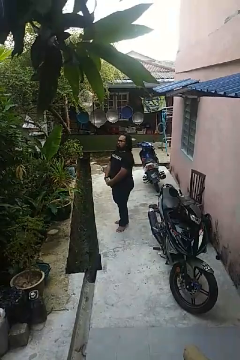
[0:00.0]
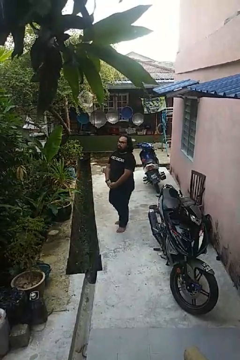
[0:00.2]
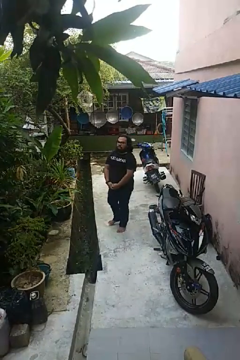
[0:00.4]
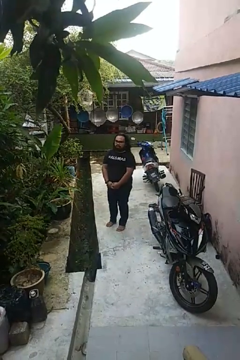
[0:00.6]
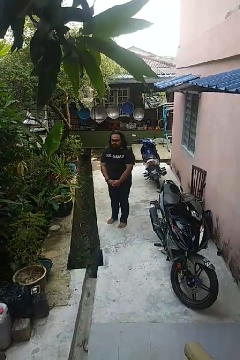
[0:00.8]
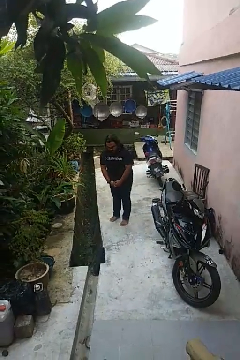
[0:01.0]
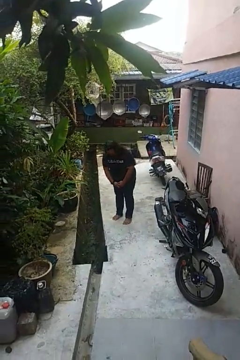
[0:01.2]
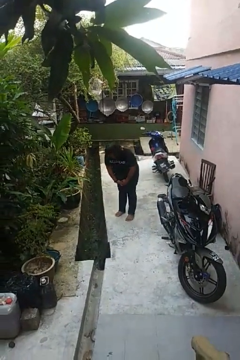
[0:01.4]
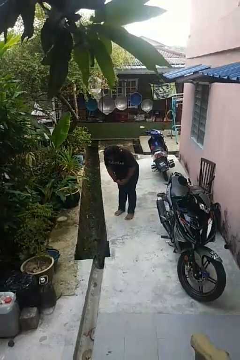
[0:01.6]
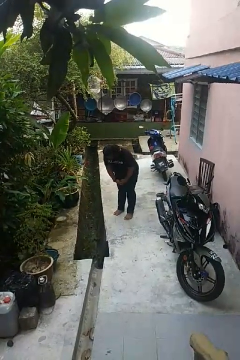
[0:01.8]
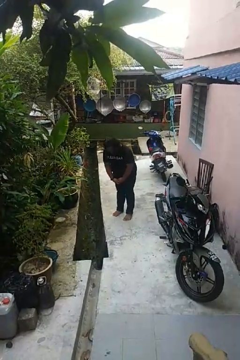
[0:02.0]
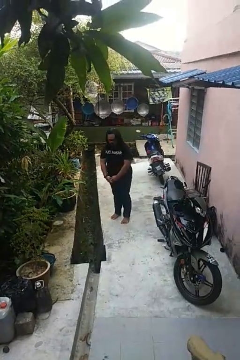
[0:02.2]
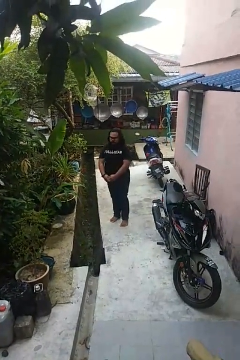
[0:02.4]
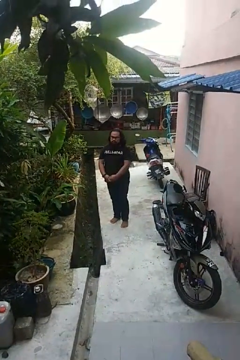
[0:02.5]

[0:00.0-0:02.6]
person bows

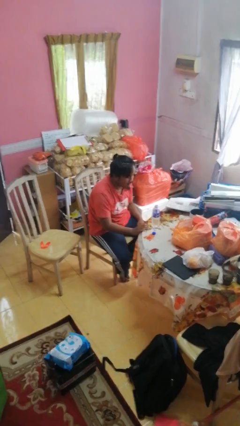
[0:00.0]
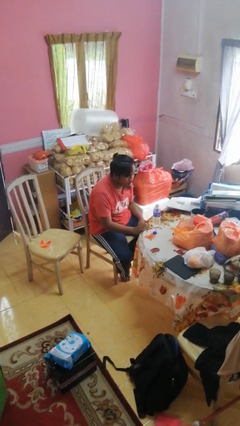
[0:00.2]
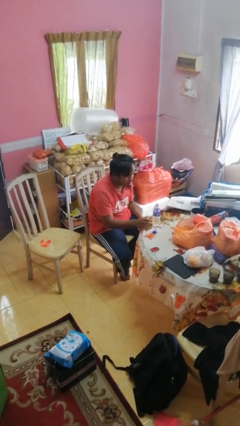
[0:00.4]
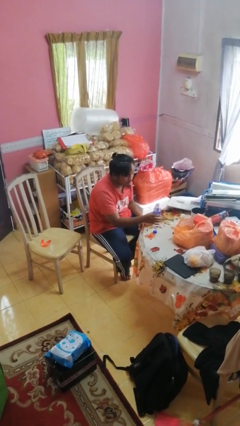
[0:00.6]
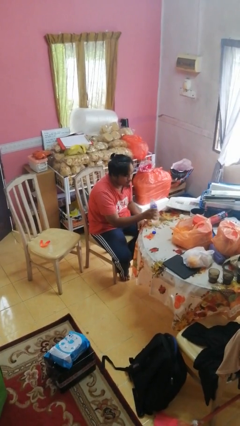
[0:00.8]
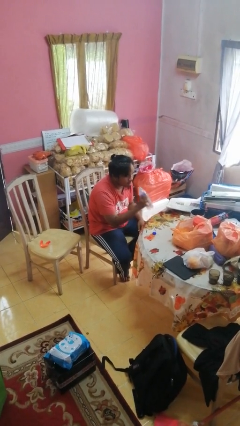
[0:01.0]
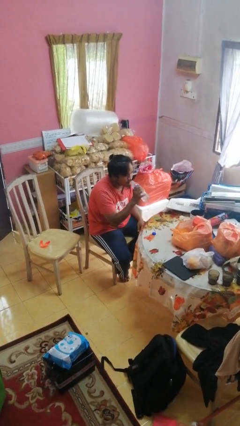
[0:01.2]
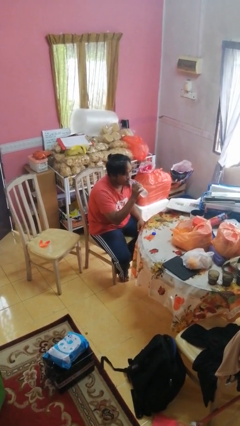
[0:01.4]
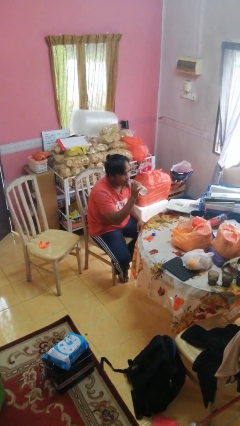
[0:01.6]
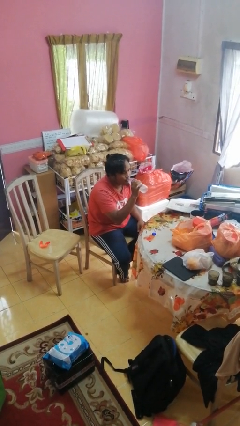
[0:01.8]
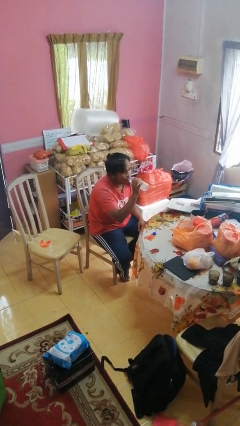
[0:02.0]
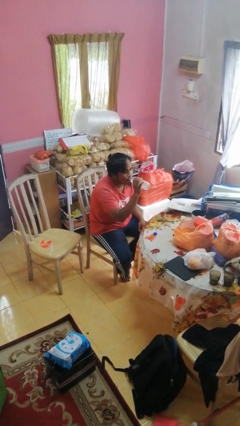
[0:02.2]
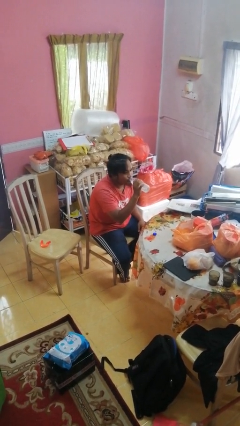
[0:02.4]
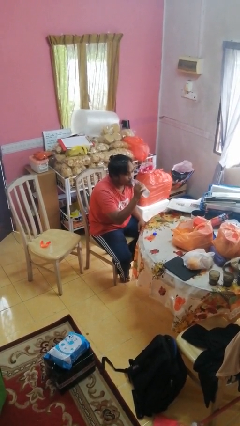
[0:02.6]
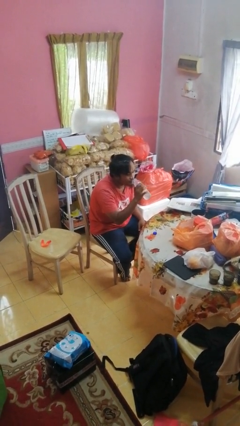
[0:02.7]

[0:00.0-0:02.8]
person drinks from bottle

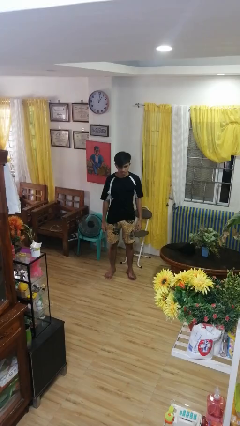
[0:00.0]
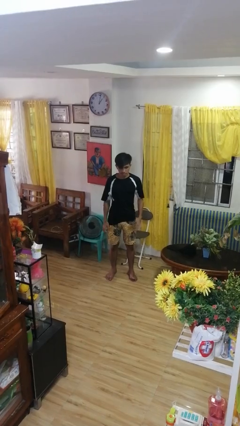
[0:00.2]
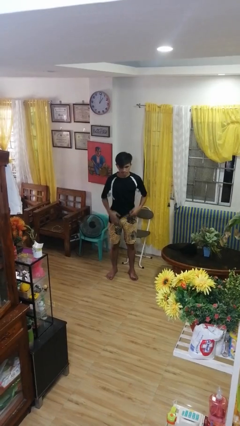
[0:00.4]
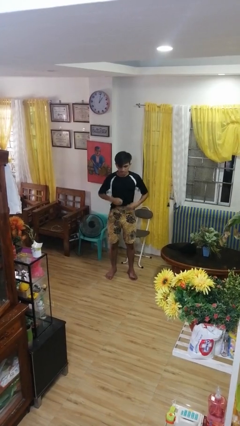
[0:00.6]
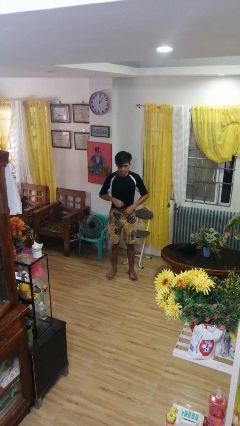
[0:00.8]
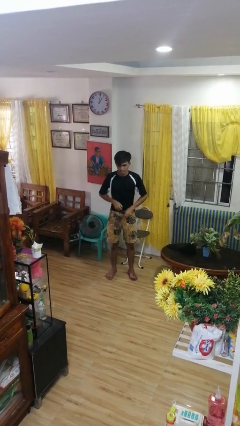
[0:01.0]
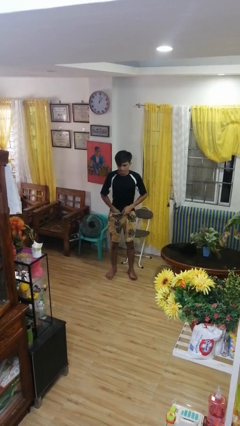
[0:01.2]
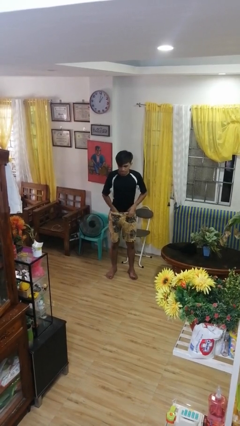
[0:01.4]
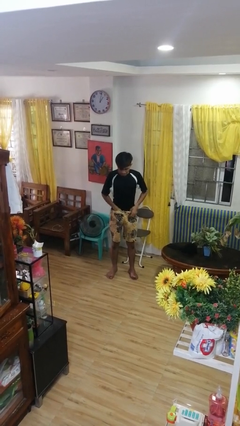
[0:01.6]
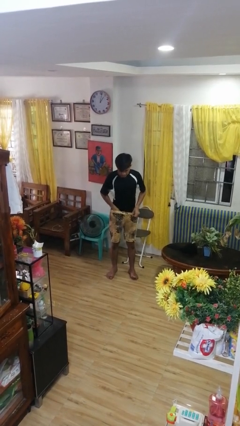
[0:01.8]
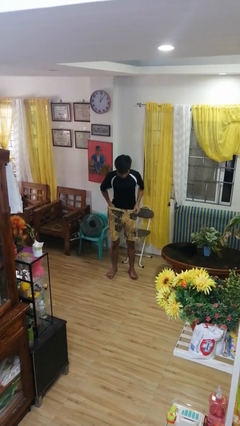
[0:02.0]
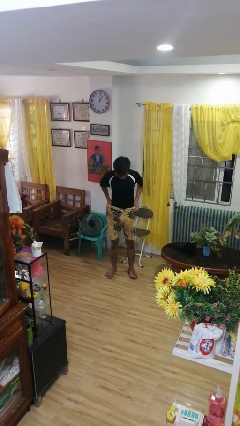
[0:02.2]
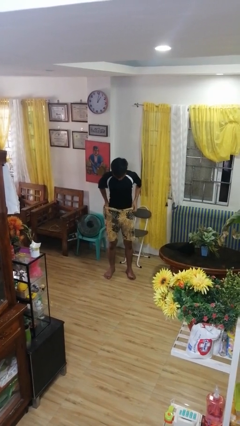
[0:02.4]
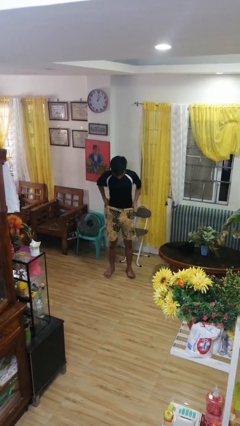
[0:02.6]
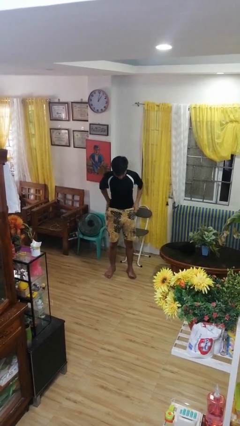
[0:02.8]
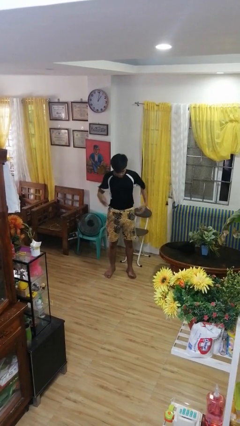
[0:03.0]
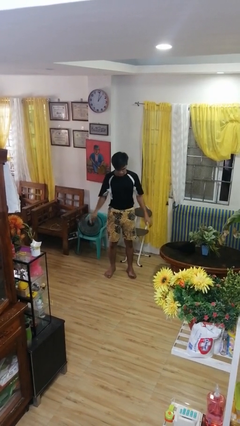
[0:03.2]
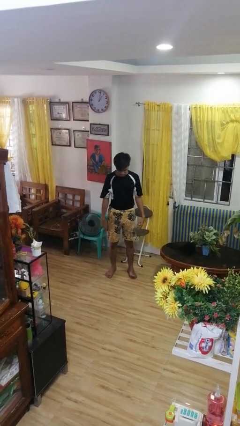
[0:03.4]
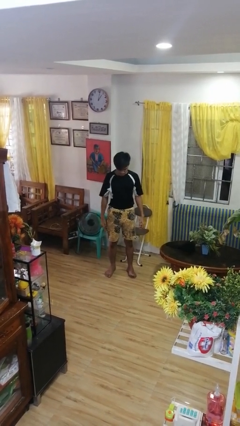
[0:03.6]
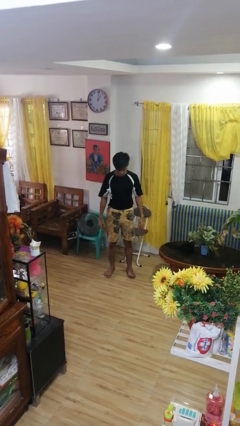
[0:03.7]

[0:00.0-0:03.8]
person tucks in shirt

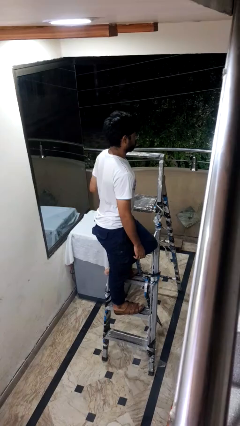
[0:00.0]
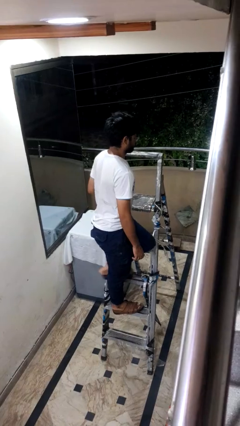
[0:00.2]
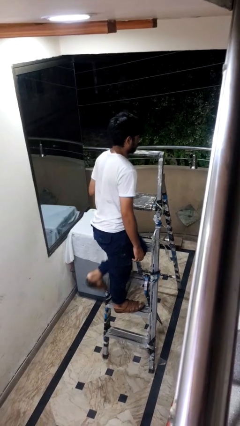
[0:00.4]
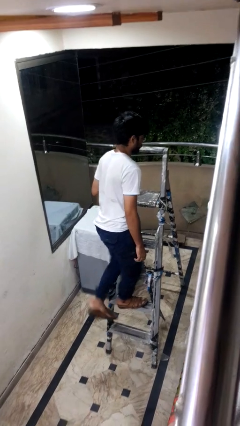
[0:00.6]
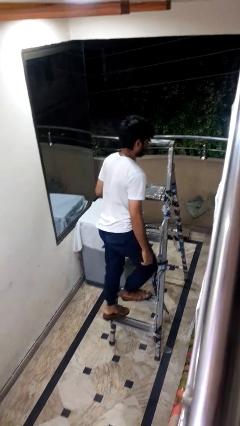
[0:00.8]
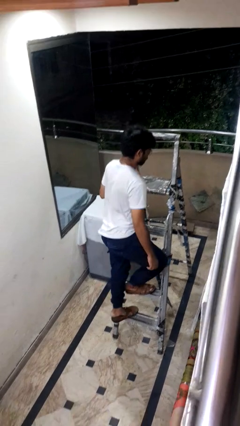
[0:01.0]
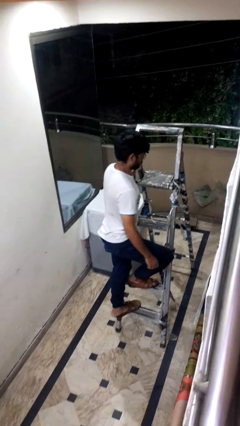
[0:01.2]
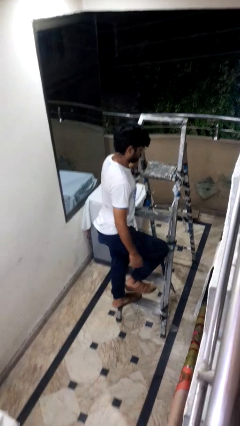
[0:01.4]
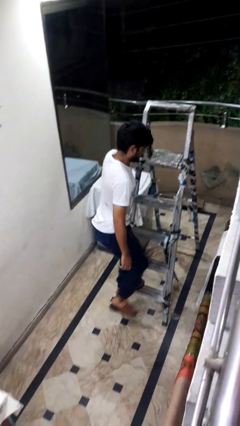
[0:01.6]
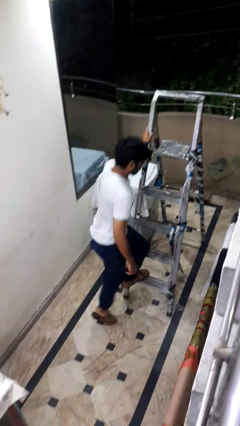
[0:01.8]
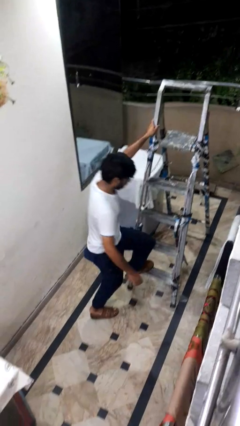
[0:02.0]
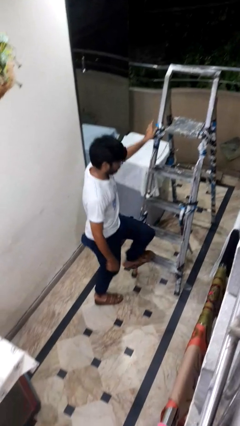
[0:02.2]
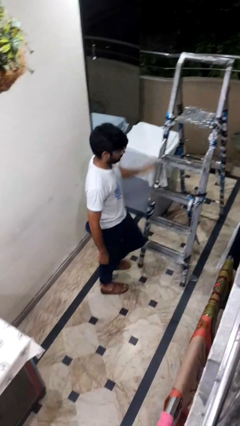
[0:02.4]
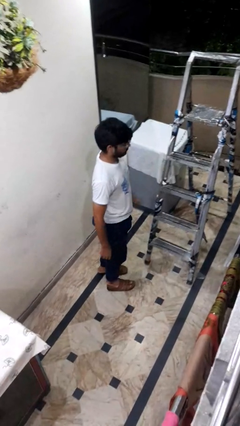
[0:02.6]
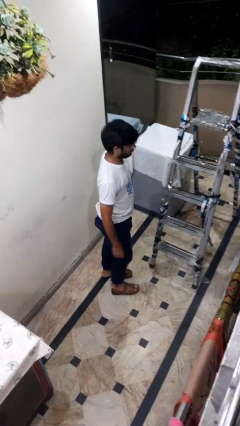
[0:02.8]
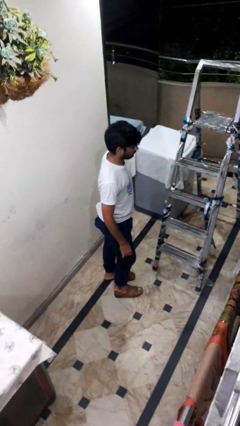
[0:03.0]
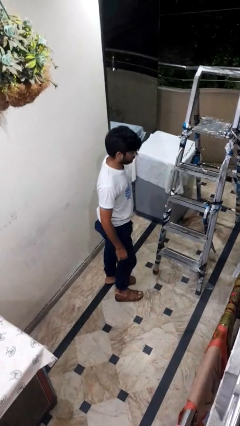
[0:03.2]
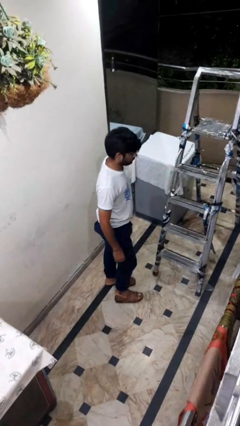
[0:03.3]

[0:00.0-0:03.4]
person climbs down ladder

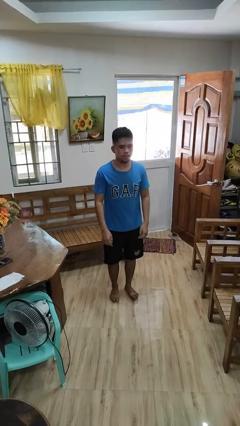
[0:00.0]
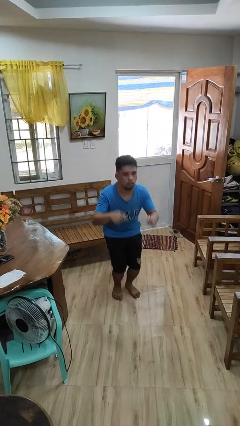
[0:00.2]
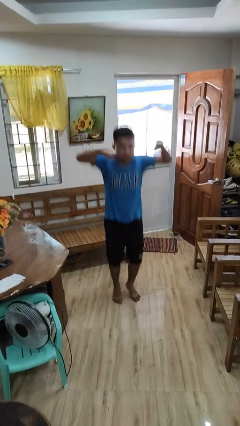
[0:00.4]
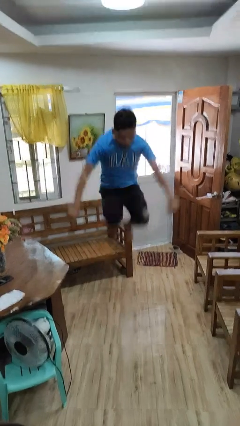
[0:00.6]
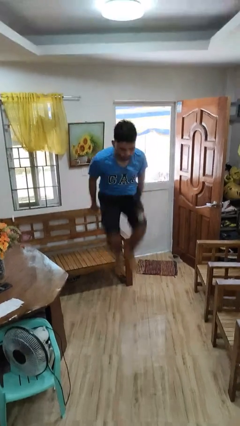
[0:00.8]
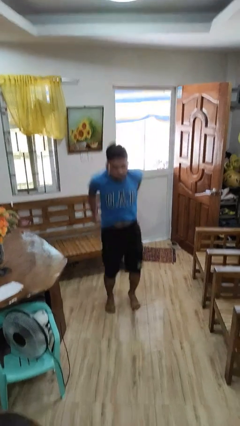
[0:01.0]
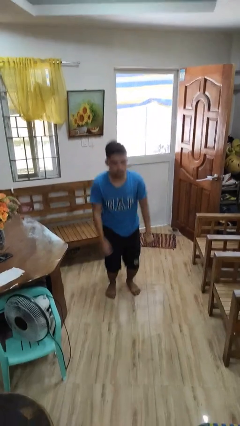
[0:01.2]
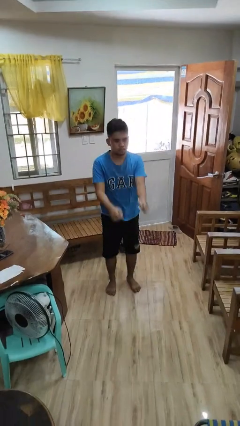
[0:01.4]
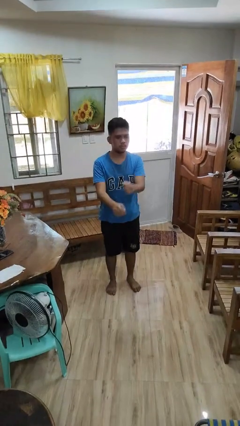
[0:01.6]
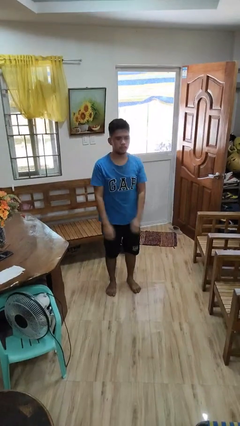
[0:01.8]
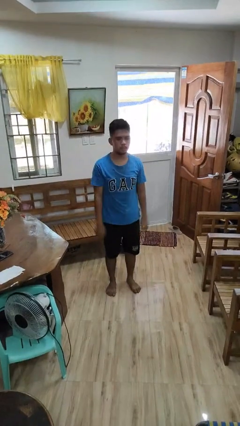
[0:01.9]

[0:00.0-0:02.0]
person jumps

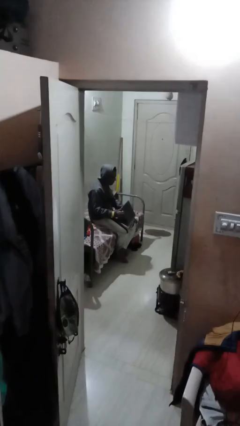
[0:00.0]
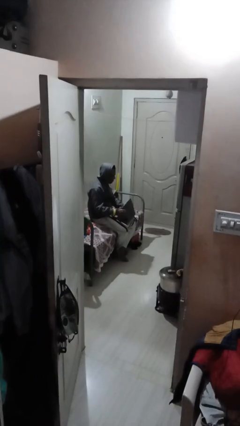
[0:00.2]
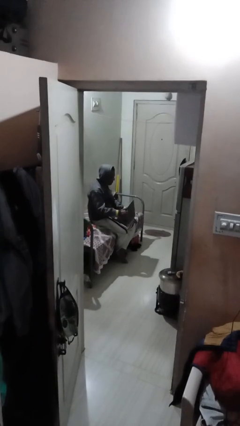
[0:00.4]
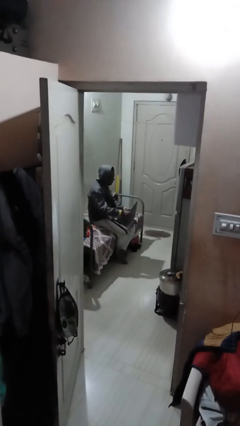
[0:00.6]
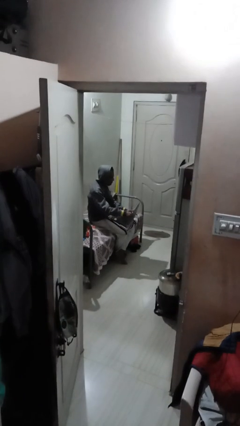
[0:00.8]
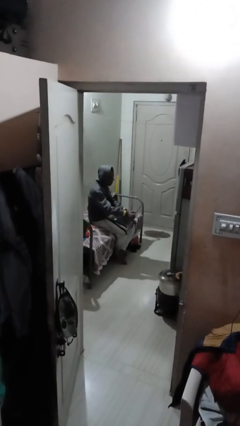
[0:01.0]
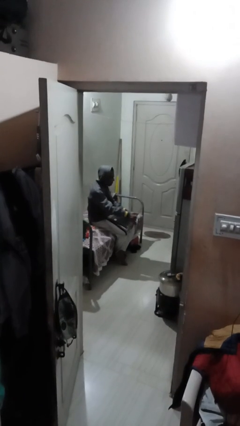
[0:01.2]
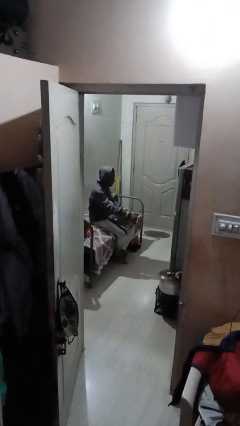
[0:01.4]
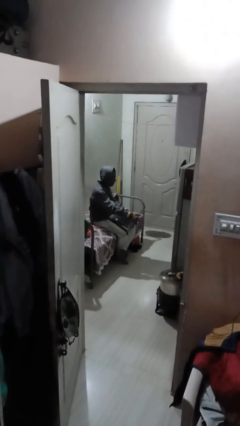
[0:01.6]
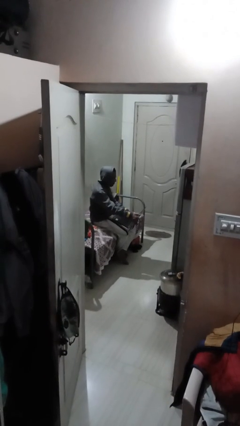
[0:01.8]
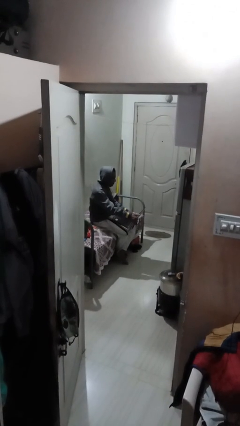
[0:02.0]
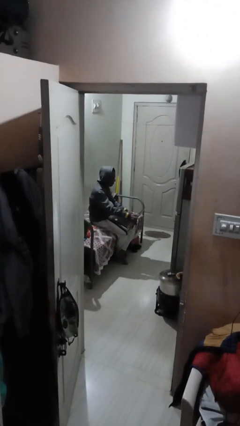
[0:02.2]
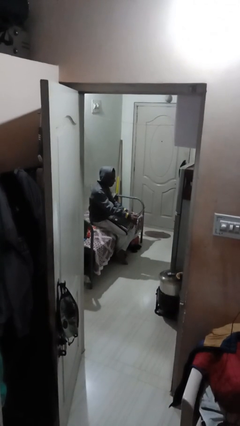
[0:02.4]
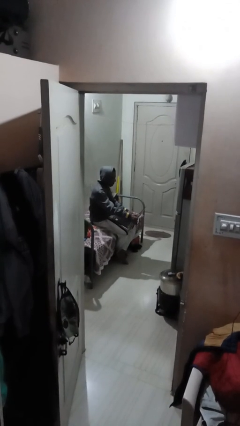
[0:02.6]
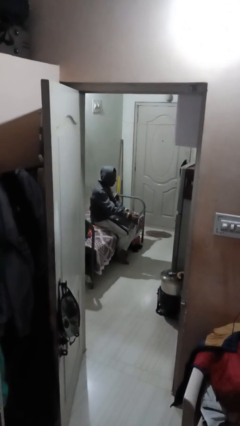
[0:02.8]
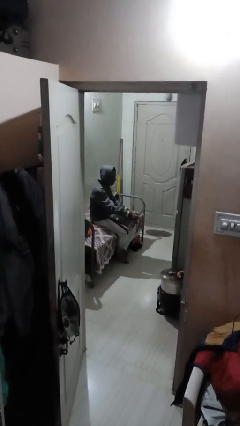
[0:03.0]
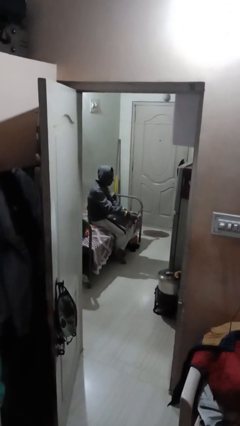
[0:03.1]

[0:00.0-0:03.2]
person interacts with laptop
